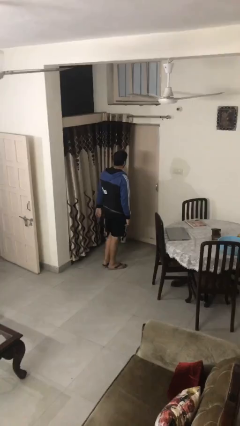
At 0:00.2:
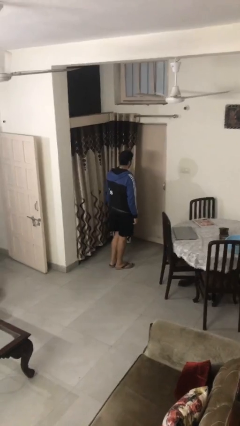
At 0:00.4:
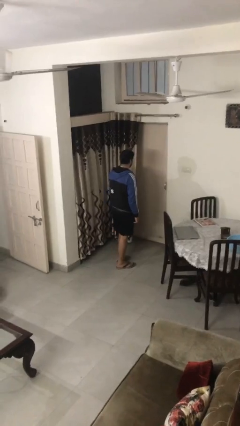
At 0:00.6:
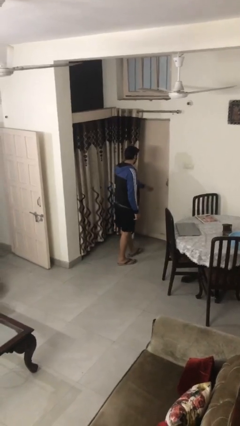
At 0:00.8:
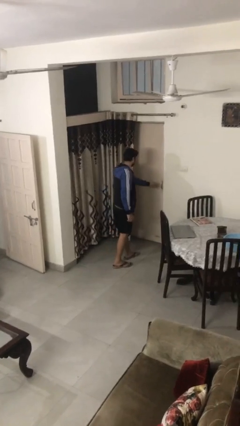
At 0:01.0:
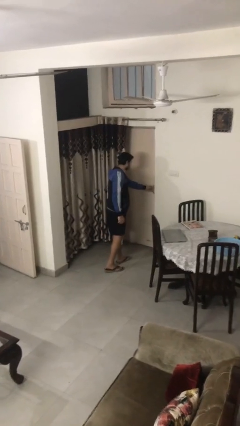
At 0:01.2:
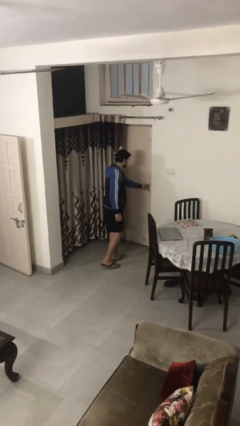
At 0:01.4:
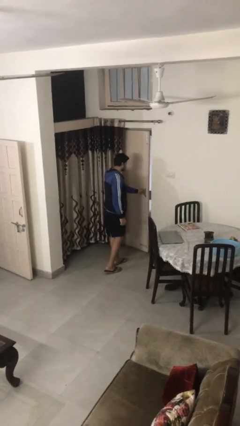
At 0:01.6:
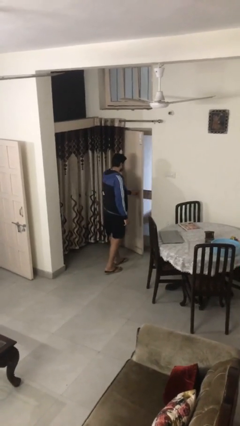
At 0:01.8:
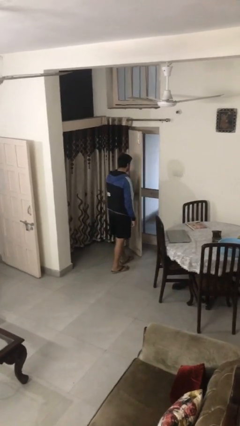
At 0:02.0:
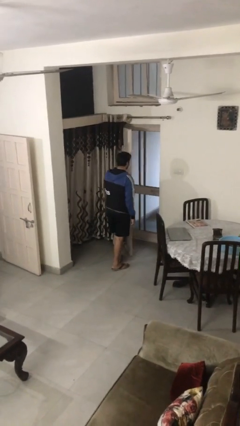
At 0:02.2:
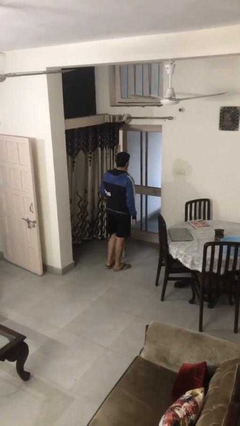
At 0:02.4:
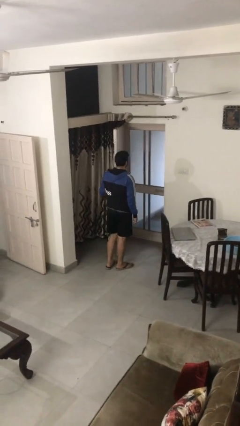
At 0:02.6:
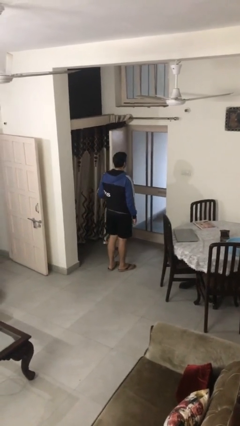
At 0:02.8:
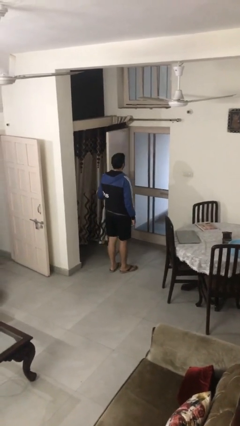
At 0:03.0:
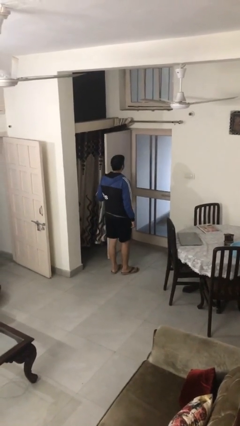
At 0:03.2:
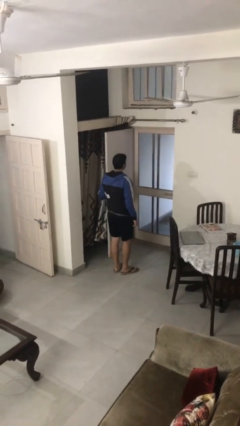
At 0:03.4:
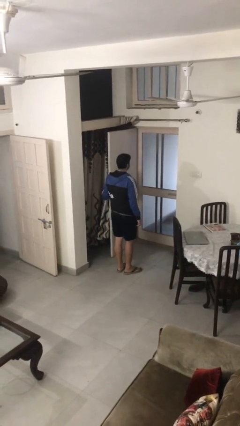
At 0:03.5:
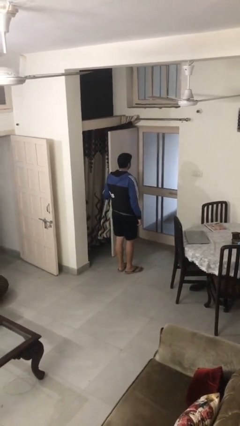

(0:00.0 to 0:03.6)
person opens facility door

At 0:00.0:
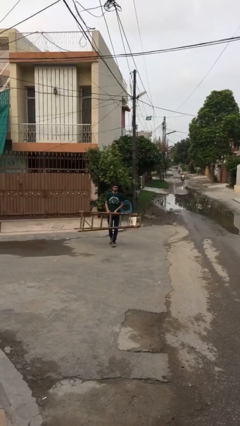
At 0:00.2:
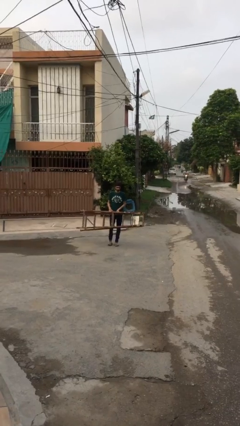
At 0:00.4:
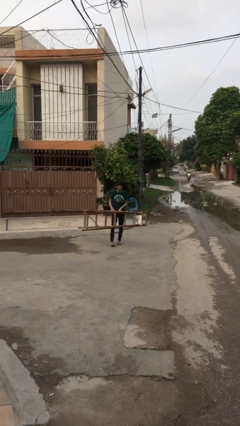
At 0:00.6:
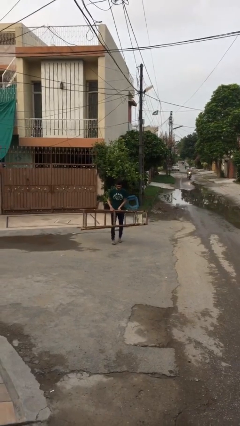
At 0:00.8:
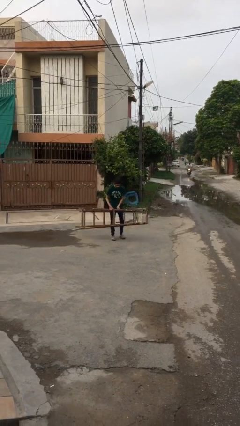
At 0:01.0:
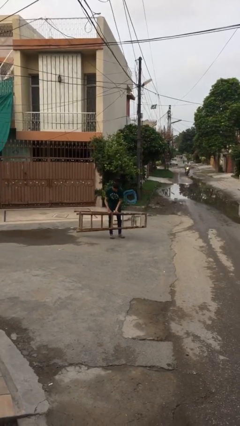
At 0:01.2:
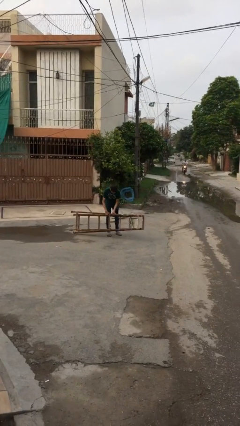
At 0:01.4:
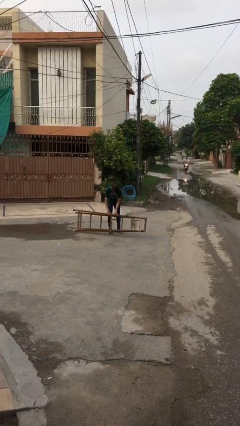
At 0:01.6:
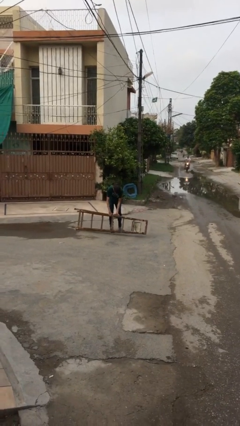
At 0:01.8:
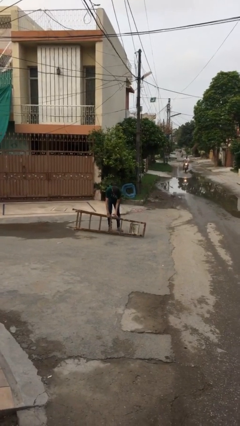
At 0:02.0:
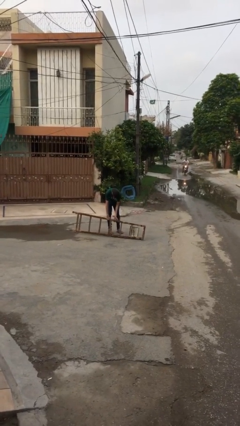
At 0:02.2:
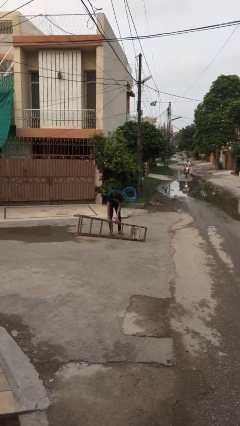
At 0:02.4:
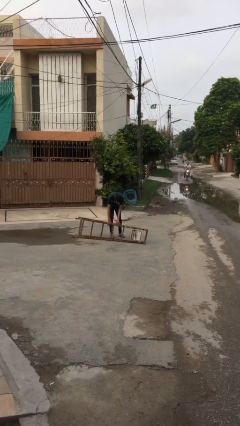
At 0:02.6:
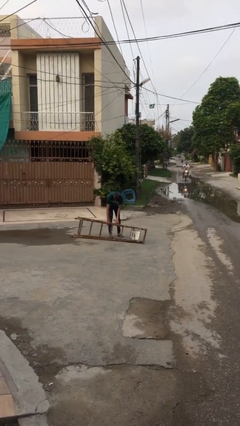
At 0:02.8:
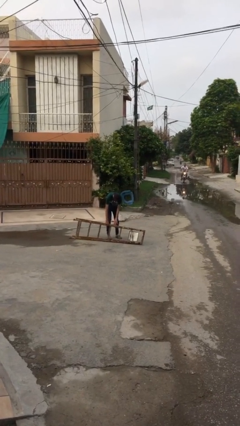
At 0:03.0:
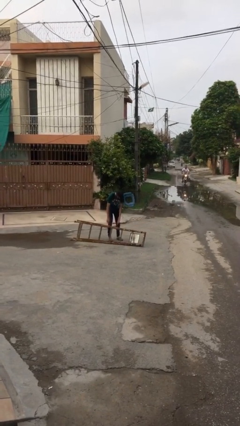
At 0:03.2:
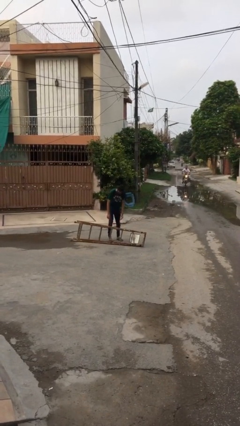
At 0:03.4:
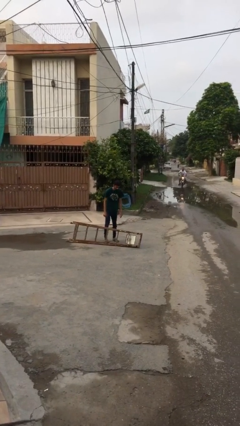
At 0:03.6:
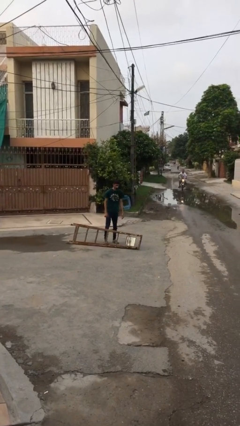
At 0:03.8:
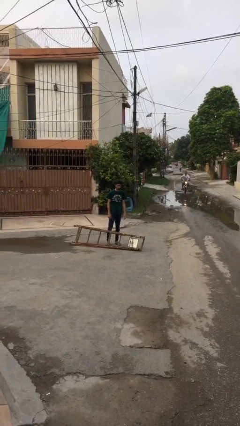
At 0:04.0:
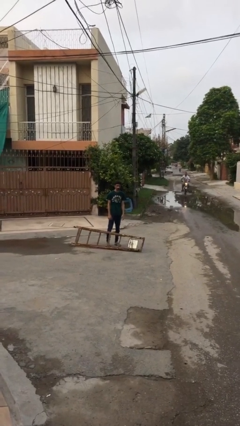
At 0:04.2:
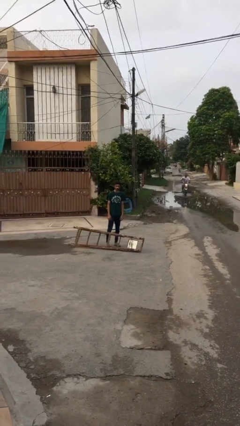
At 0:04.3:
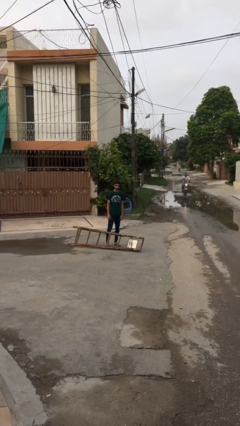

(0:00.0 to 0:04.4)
person puts down object on floor

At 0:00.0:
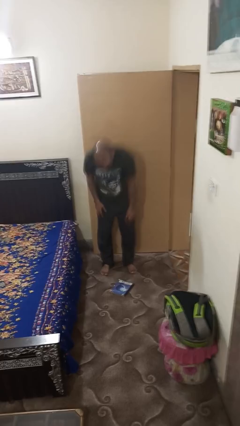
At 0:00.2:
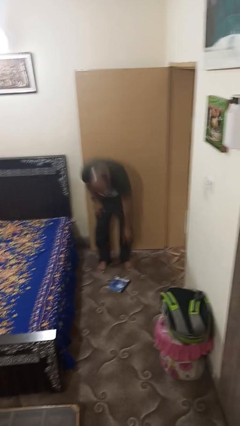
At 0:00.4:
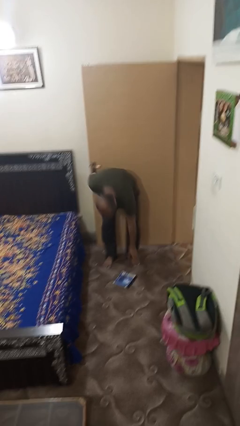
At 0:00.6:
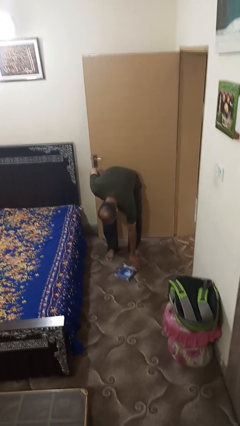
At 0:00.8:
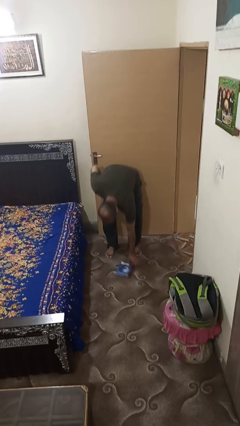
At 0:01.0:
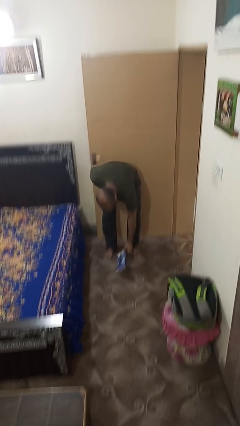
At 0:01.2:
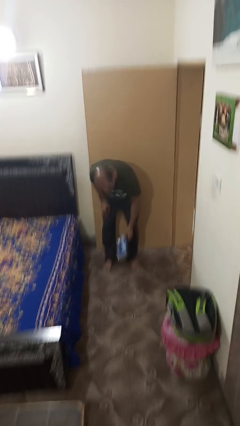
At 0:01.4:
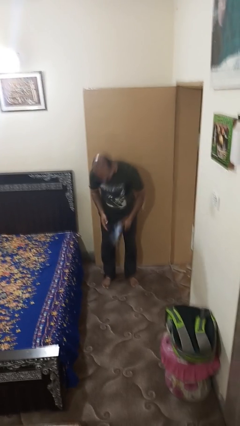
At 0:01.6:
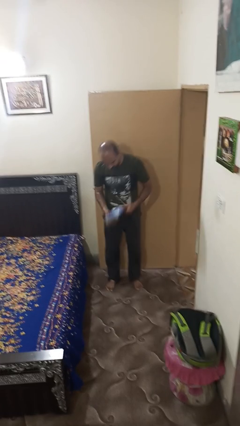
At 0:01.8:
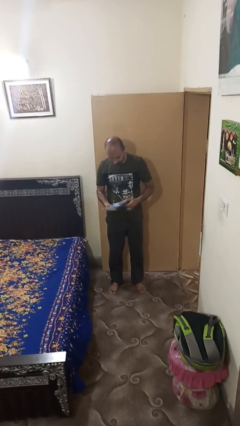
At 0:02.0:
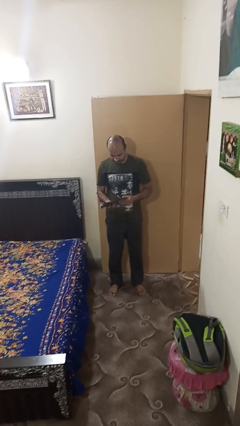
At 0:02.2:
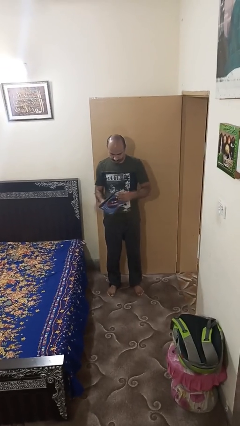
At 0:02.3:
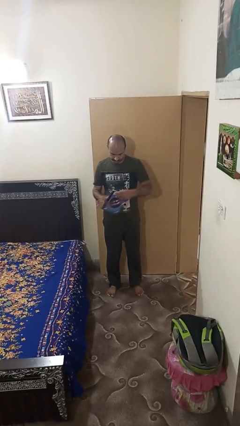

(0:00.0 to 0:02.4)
person picks up object from floor

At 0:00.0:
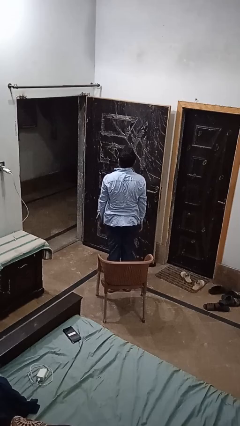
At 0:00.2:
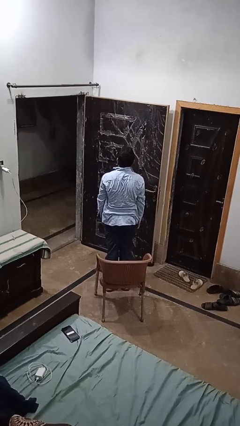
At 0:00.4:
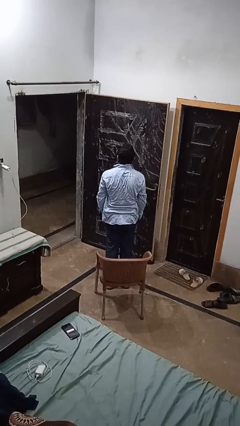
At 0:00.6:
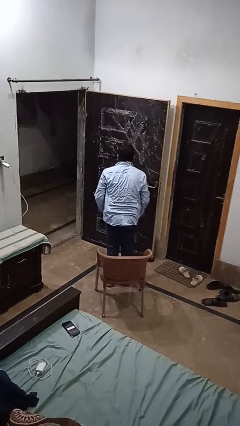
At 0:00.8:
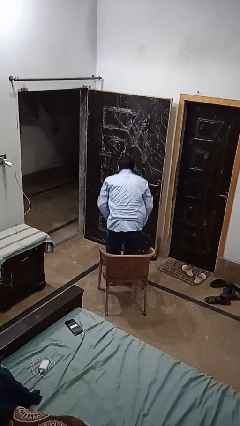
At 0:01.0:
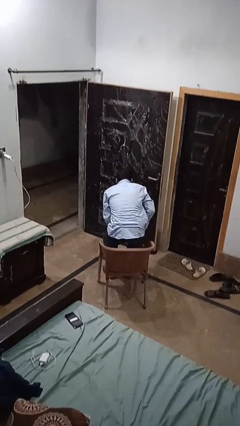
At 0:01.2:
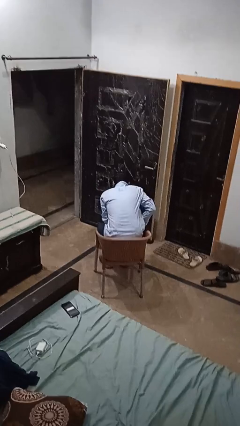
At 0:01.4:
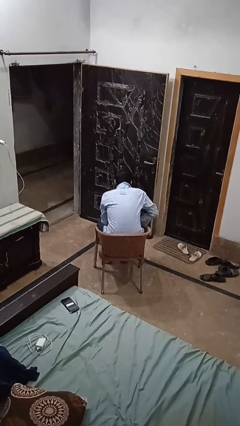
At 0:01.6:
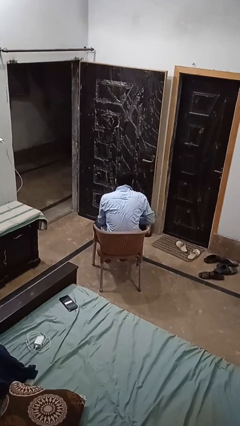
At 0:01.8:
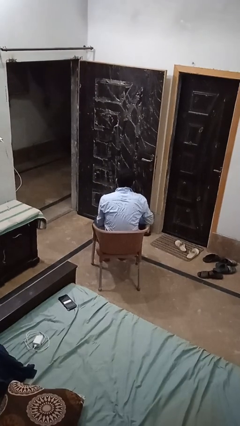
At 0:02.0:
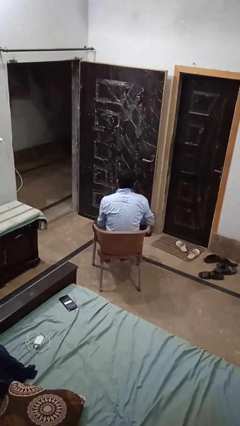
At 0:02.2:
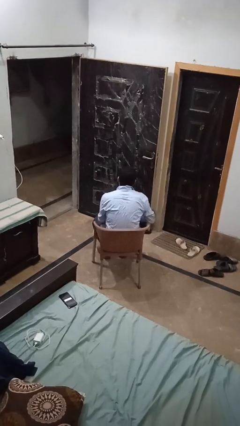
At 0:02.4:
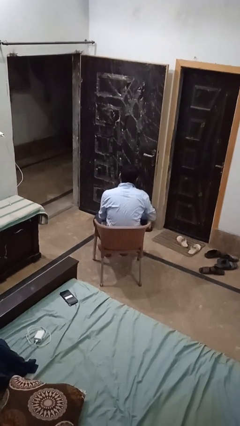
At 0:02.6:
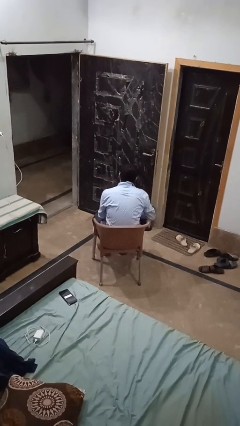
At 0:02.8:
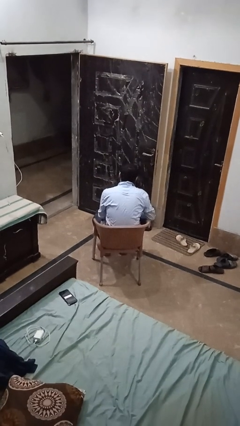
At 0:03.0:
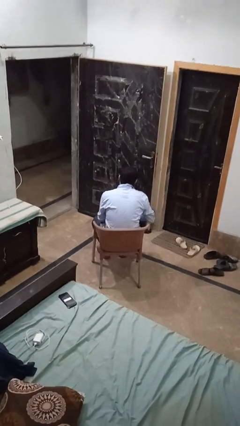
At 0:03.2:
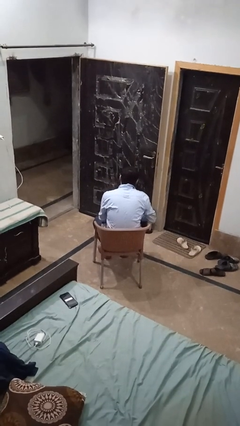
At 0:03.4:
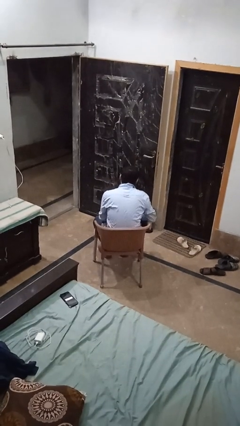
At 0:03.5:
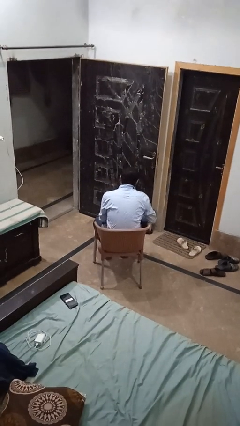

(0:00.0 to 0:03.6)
person sits down

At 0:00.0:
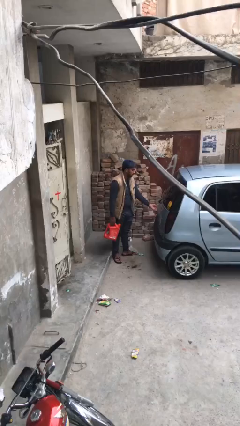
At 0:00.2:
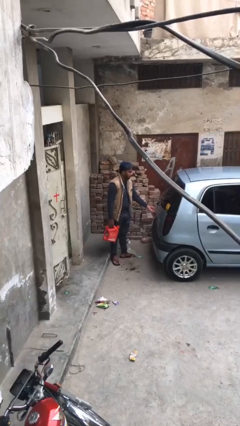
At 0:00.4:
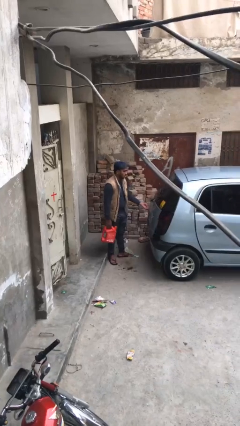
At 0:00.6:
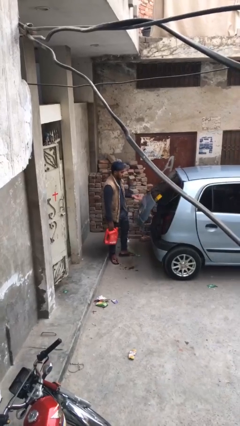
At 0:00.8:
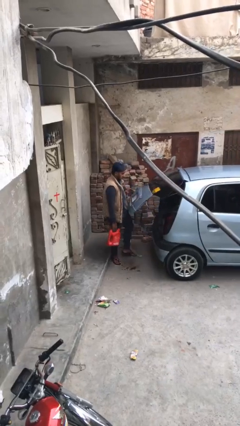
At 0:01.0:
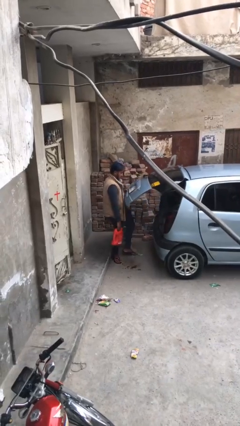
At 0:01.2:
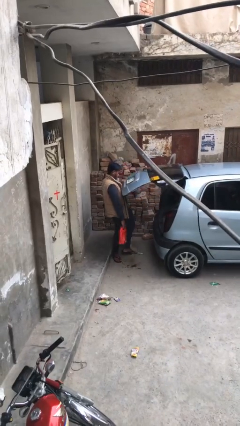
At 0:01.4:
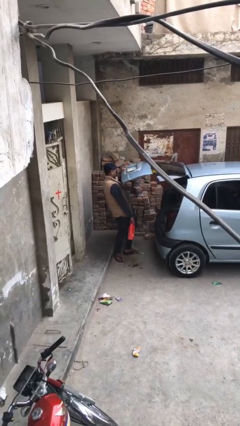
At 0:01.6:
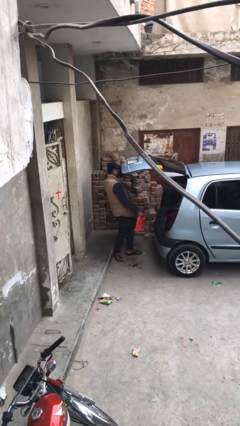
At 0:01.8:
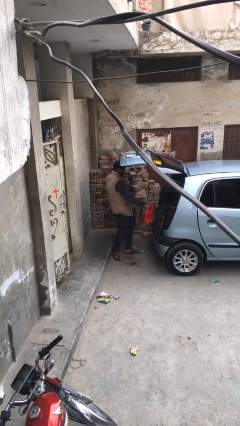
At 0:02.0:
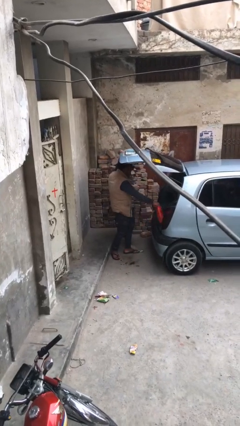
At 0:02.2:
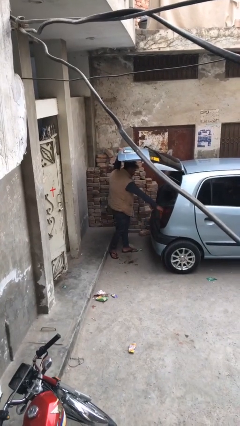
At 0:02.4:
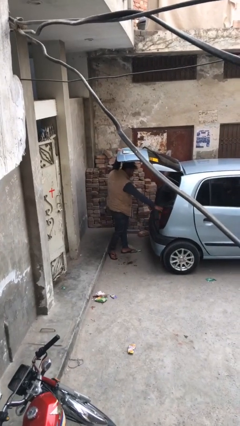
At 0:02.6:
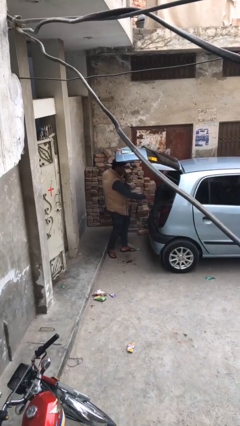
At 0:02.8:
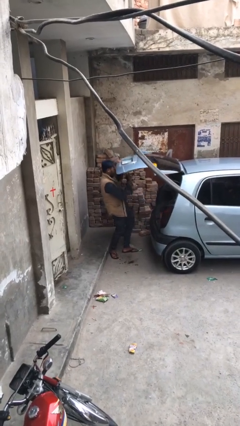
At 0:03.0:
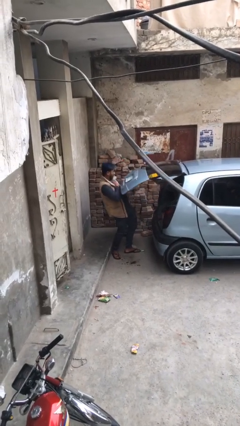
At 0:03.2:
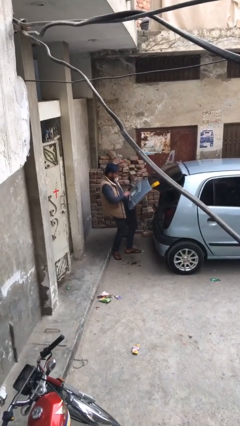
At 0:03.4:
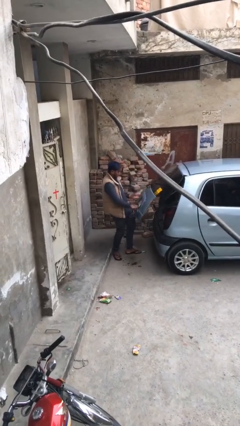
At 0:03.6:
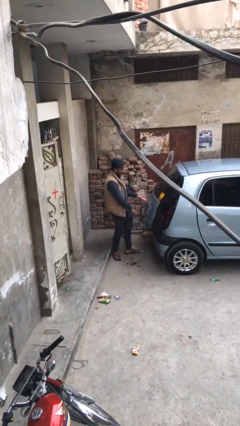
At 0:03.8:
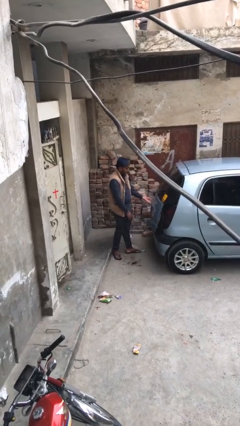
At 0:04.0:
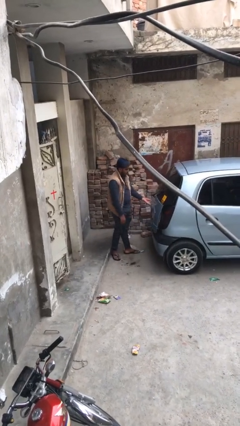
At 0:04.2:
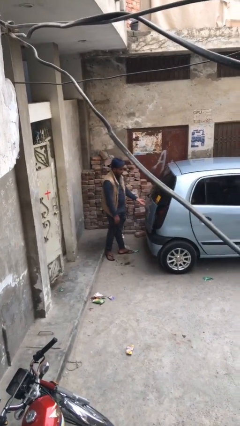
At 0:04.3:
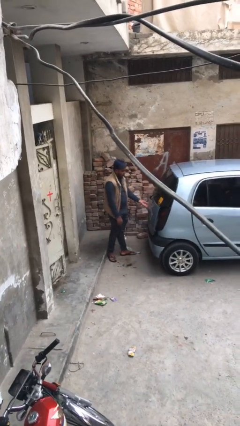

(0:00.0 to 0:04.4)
person loads car
